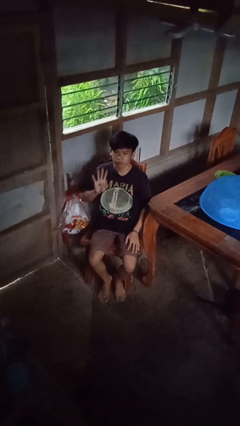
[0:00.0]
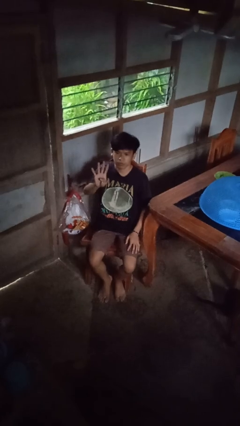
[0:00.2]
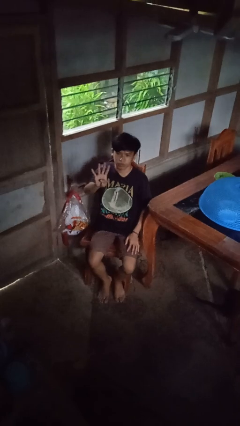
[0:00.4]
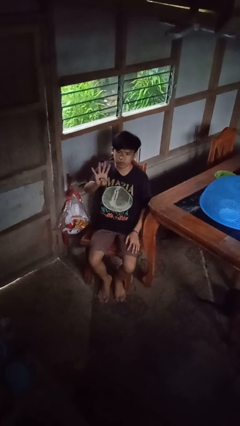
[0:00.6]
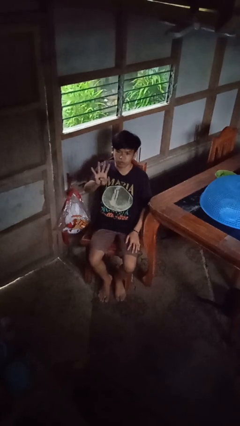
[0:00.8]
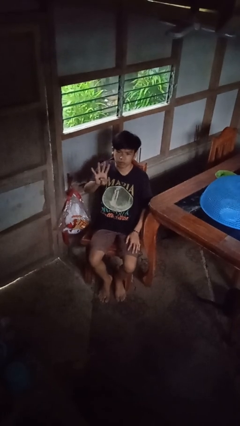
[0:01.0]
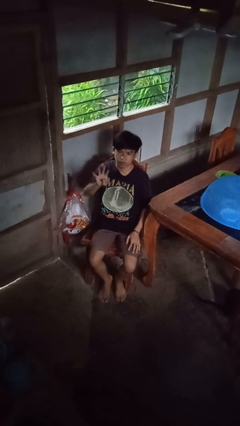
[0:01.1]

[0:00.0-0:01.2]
person gestures number four

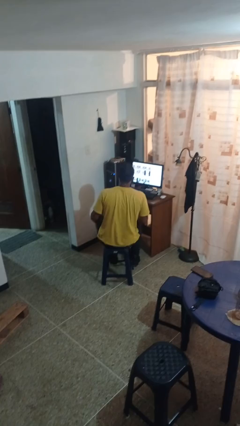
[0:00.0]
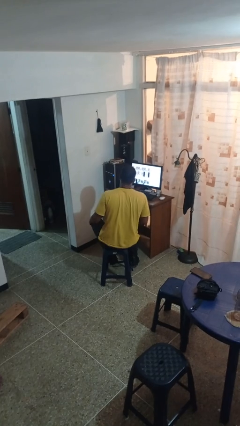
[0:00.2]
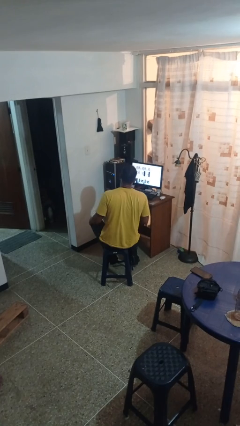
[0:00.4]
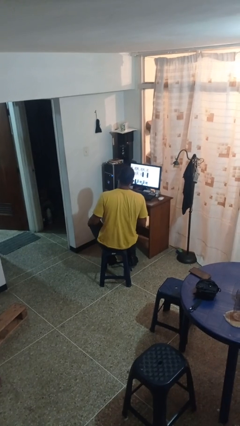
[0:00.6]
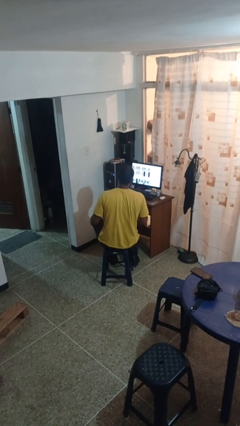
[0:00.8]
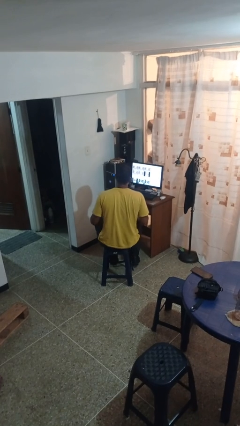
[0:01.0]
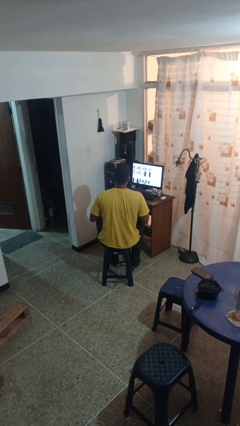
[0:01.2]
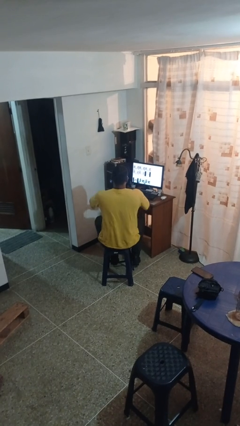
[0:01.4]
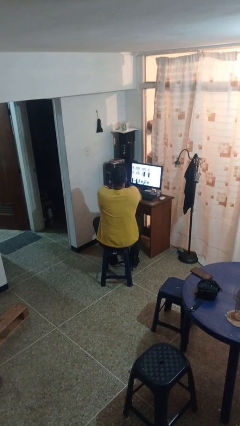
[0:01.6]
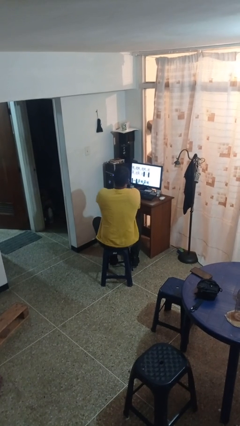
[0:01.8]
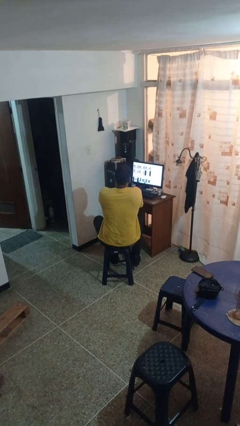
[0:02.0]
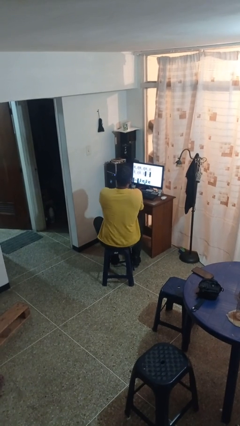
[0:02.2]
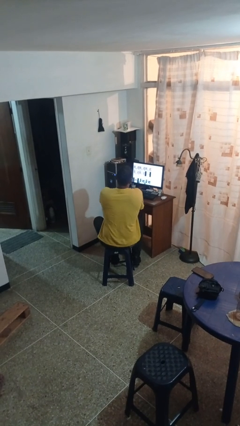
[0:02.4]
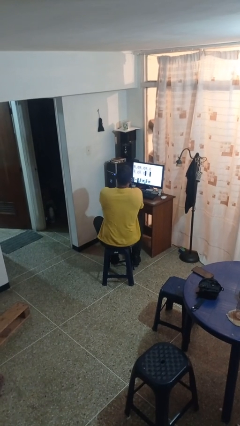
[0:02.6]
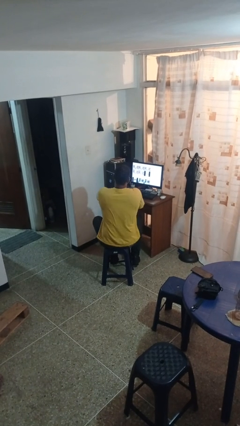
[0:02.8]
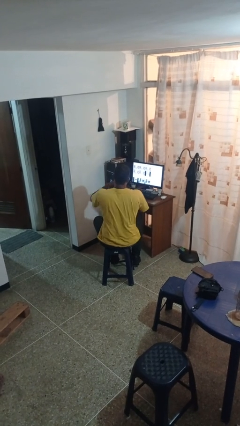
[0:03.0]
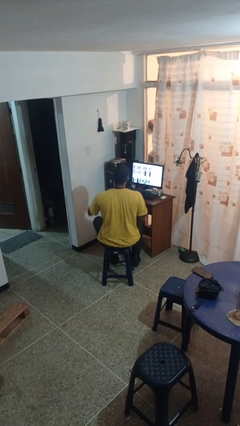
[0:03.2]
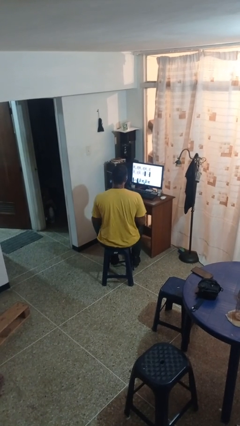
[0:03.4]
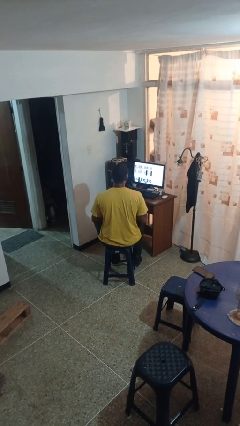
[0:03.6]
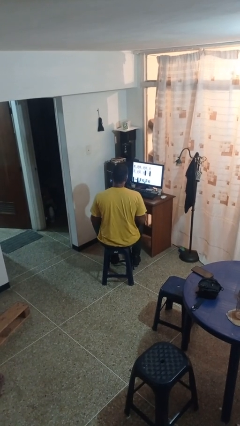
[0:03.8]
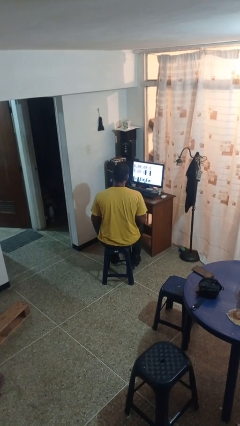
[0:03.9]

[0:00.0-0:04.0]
person crosses arms

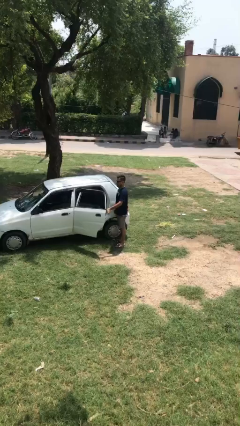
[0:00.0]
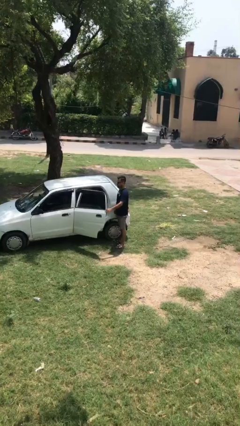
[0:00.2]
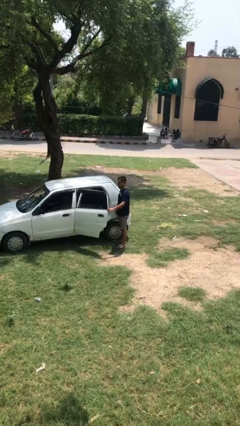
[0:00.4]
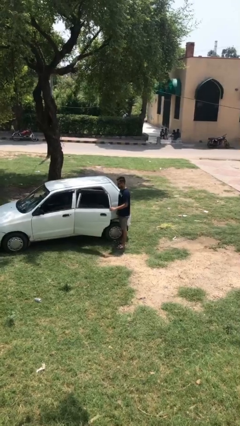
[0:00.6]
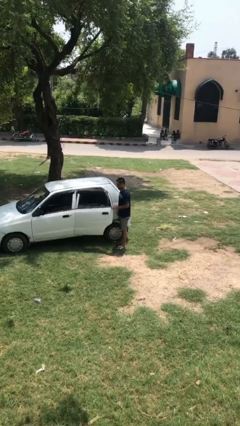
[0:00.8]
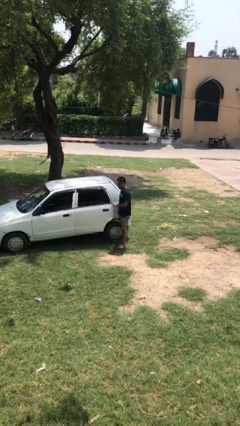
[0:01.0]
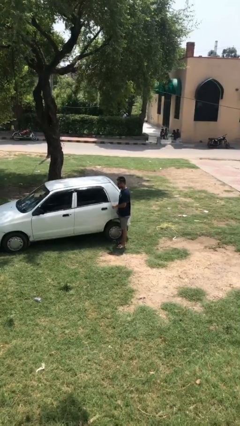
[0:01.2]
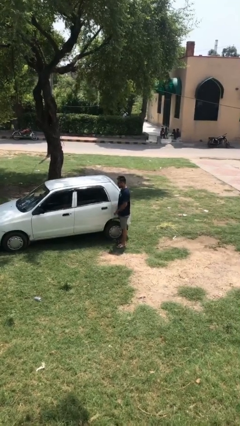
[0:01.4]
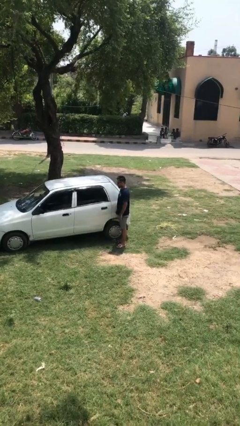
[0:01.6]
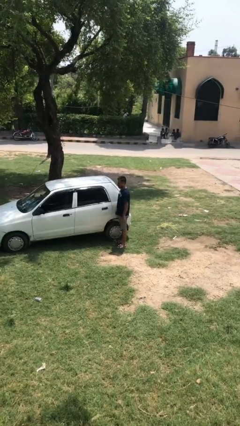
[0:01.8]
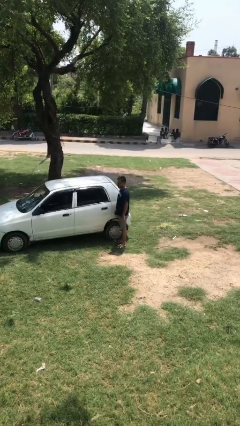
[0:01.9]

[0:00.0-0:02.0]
person closes car door

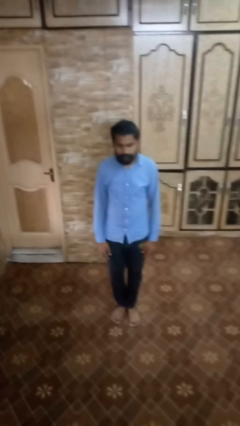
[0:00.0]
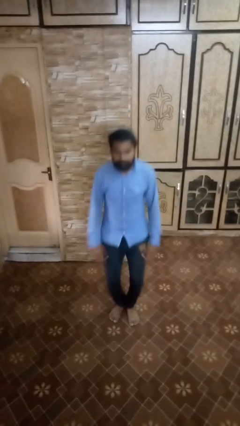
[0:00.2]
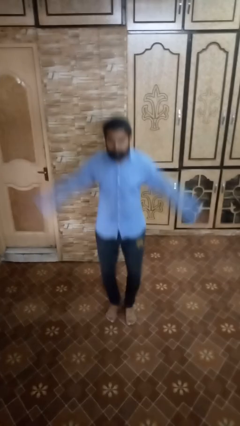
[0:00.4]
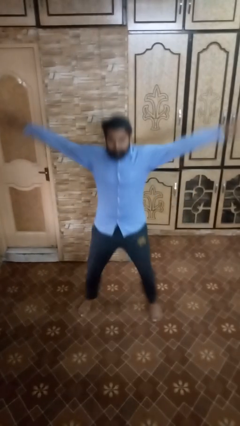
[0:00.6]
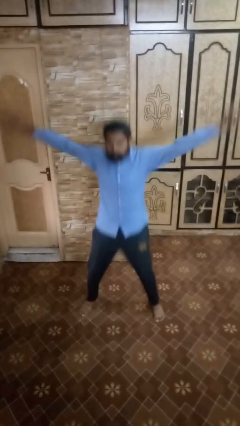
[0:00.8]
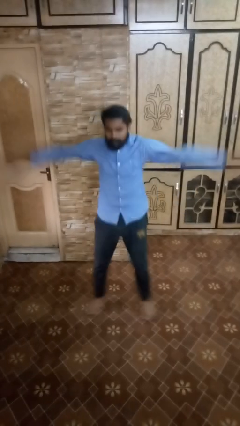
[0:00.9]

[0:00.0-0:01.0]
person exercises with jumping jacks

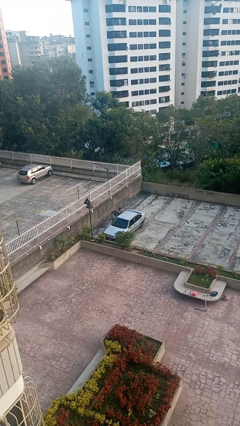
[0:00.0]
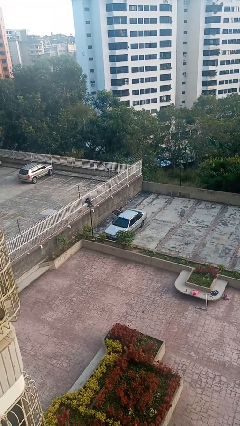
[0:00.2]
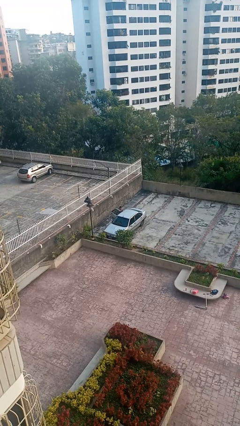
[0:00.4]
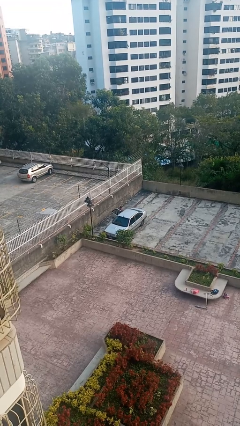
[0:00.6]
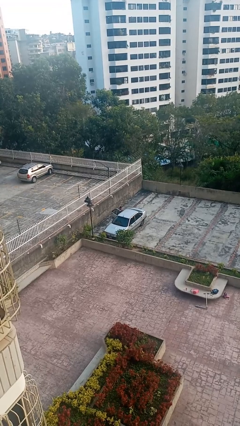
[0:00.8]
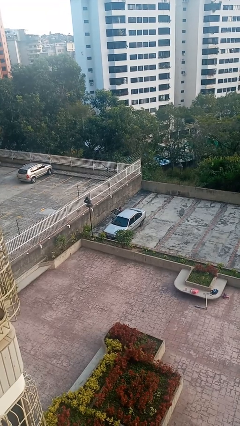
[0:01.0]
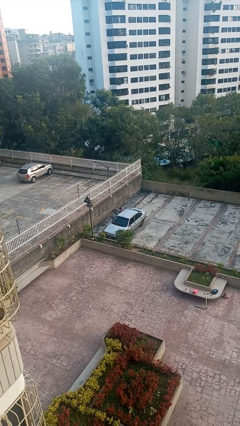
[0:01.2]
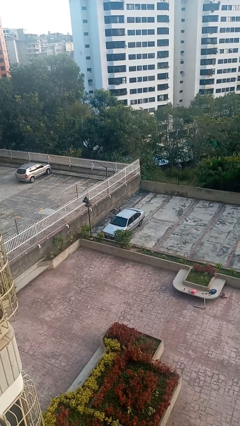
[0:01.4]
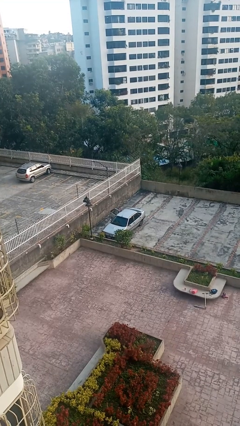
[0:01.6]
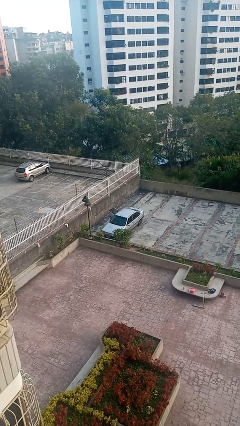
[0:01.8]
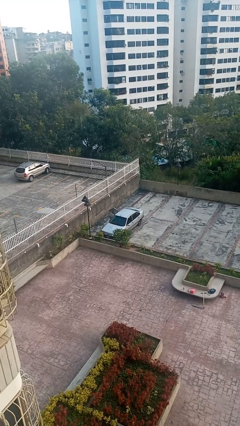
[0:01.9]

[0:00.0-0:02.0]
person enters car

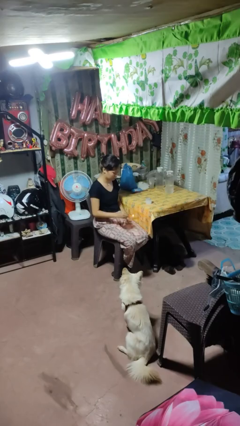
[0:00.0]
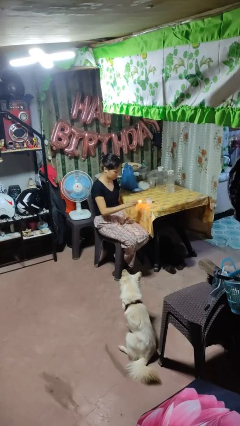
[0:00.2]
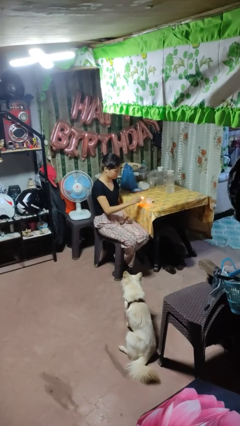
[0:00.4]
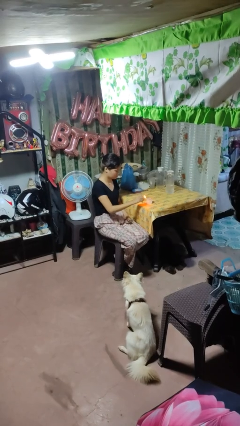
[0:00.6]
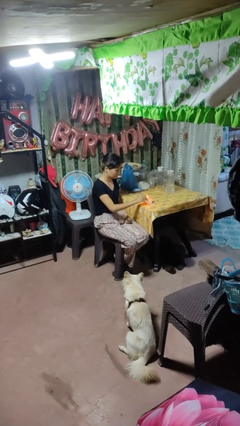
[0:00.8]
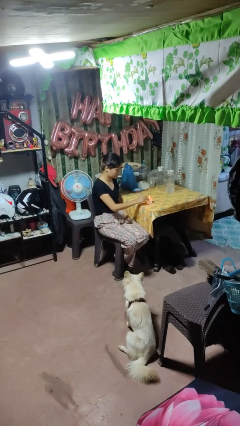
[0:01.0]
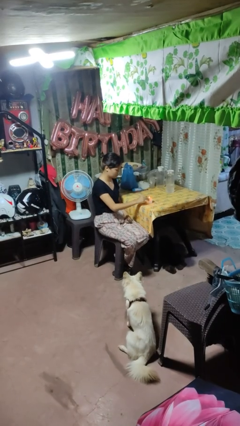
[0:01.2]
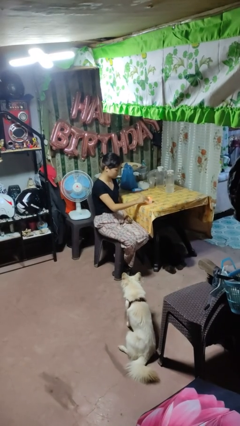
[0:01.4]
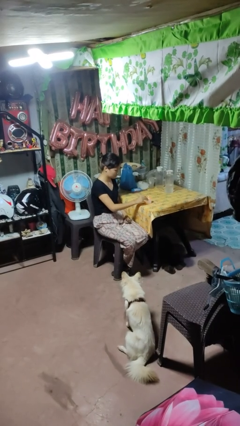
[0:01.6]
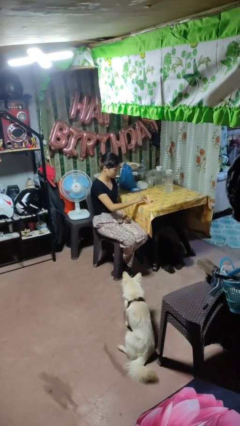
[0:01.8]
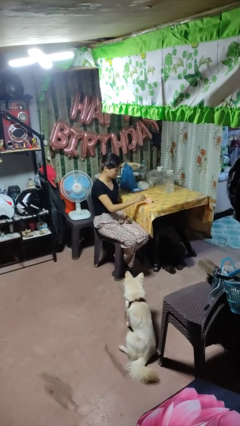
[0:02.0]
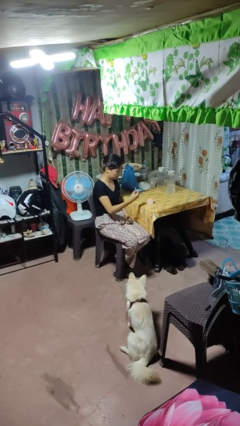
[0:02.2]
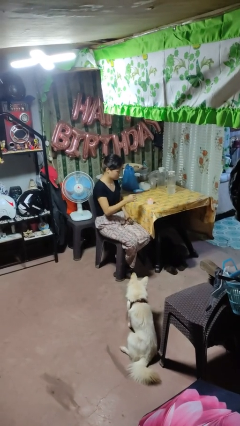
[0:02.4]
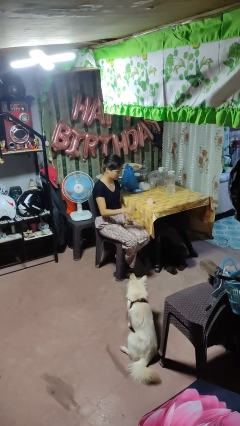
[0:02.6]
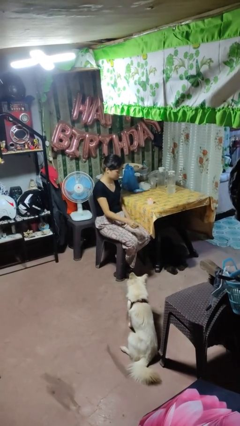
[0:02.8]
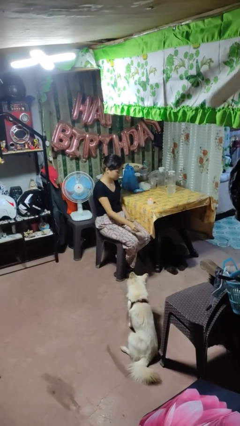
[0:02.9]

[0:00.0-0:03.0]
person lights candle

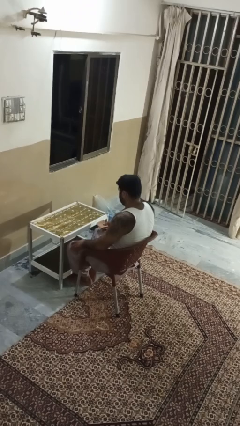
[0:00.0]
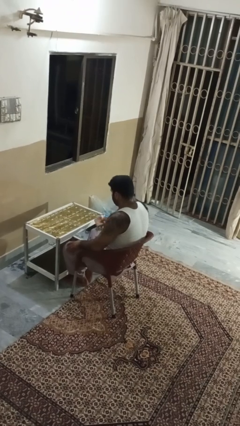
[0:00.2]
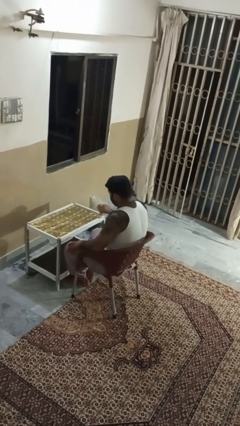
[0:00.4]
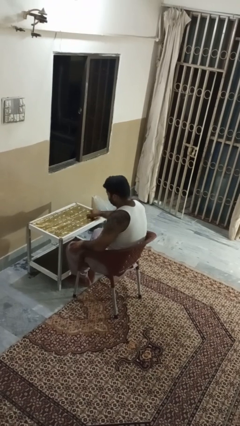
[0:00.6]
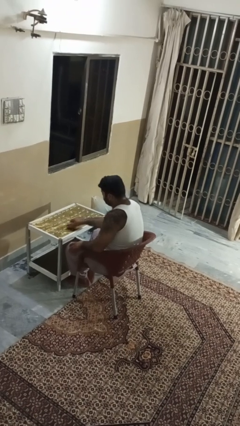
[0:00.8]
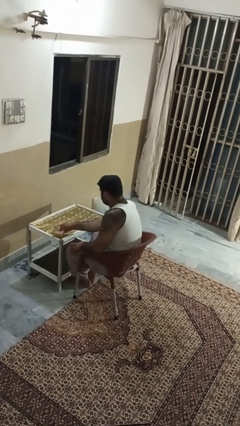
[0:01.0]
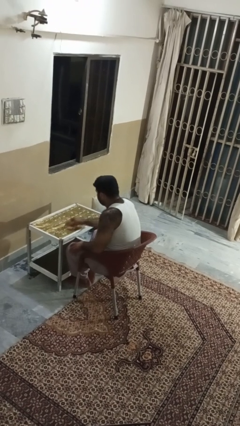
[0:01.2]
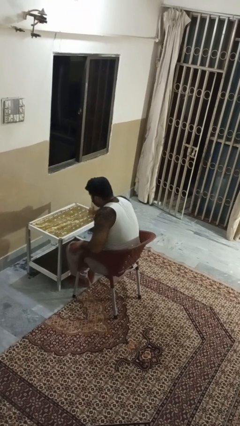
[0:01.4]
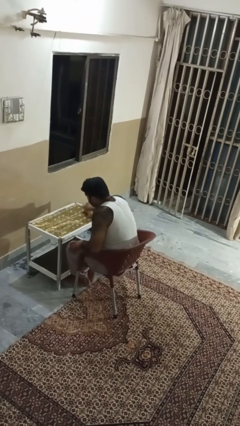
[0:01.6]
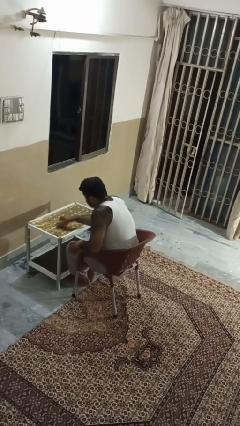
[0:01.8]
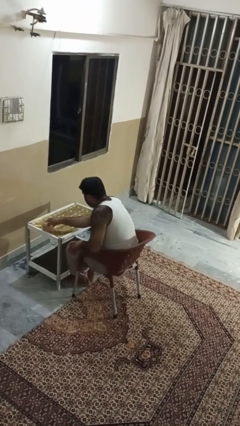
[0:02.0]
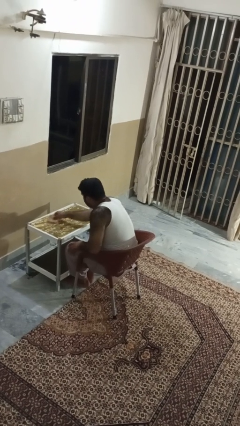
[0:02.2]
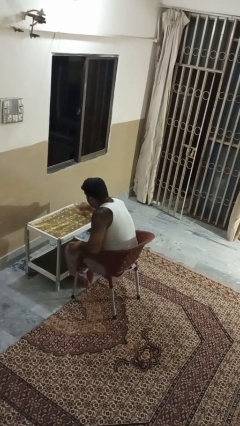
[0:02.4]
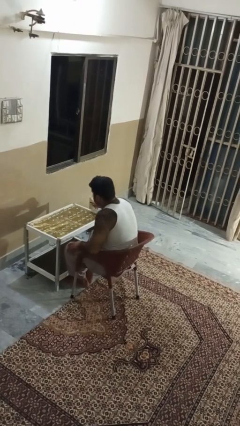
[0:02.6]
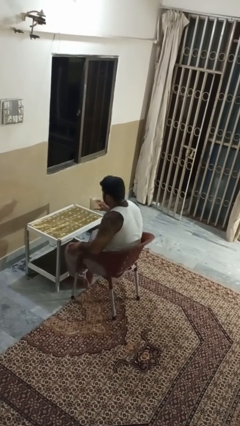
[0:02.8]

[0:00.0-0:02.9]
person cleans table with rag

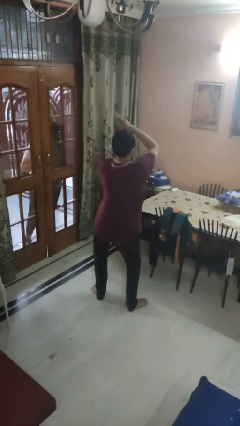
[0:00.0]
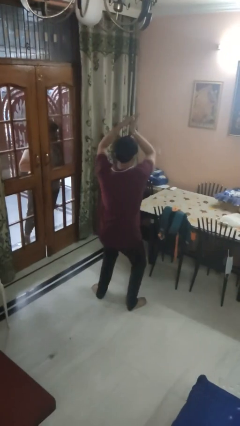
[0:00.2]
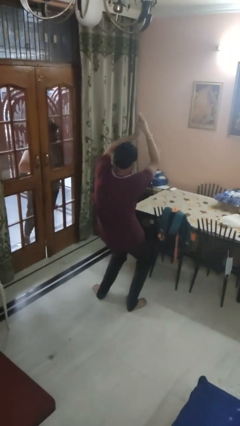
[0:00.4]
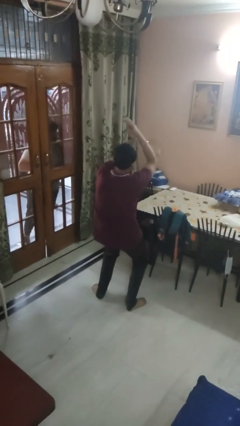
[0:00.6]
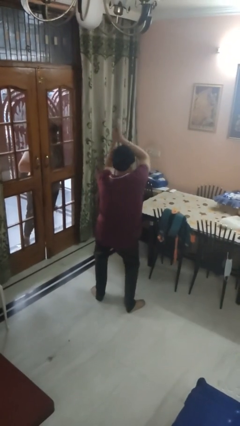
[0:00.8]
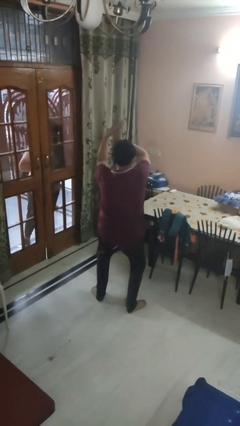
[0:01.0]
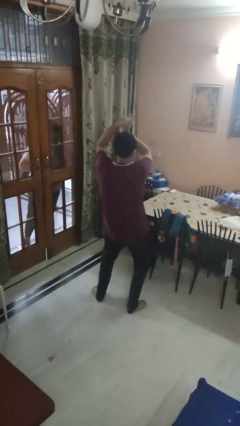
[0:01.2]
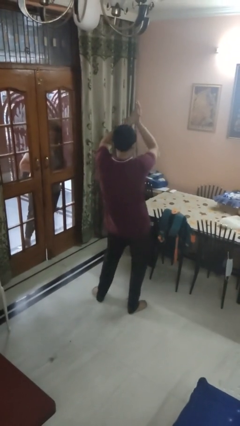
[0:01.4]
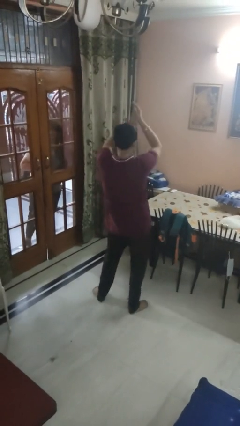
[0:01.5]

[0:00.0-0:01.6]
person dances in place
